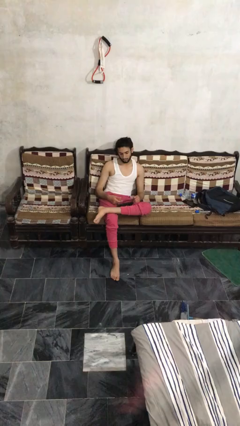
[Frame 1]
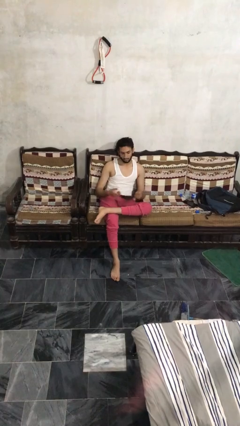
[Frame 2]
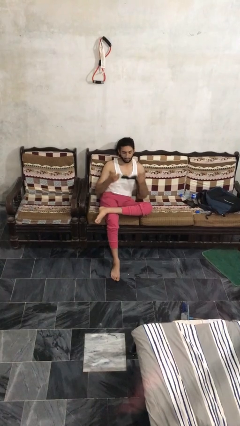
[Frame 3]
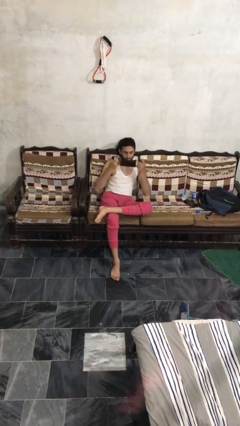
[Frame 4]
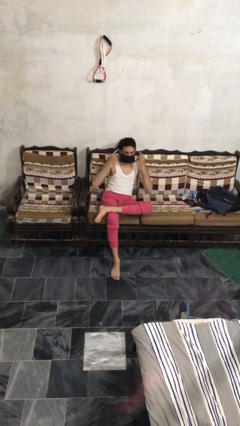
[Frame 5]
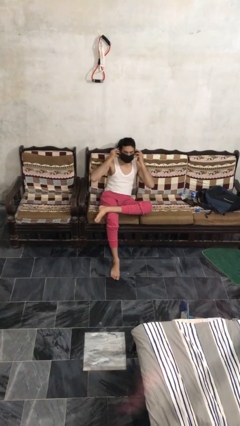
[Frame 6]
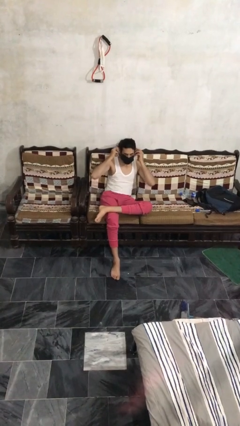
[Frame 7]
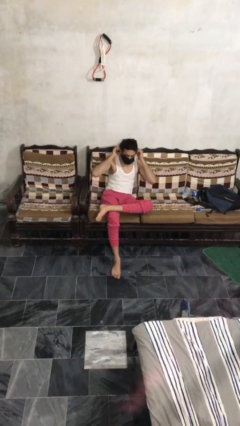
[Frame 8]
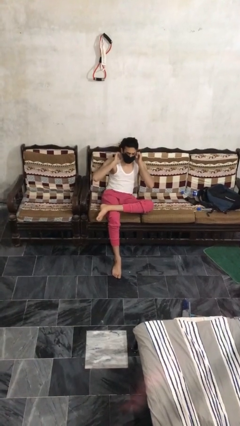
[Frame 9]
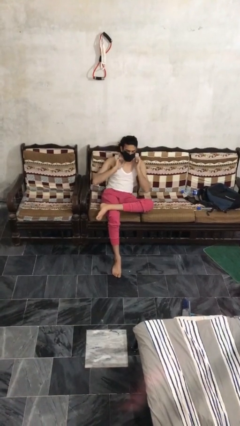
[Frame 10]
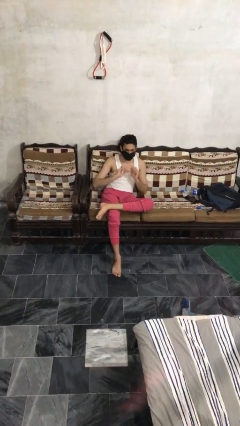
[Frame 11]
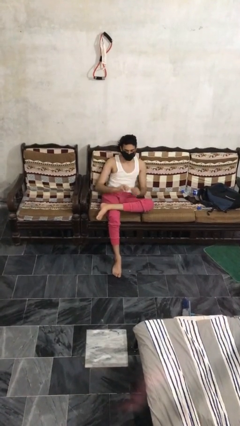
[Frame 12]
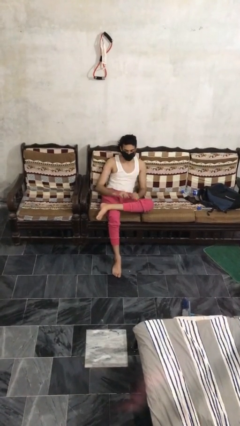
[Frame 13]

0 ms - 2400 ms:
person puts on facemask

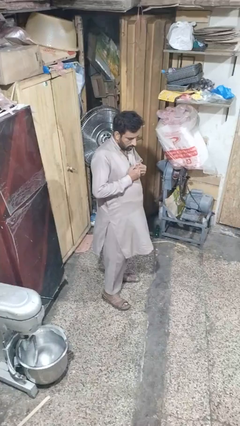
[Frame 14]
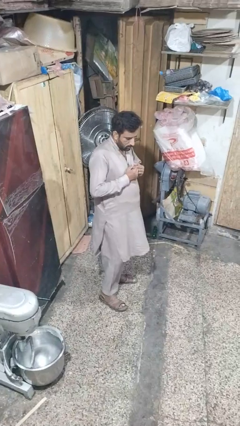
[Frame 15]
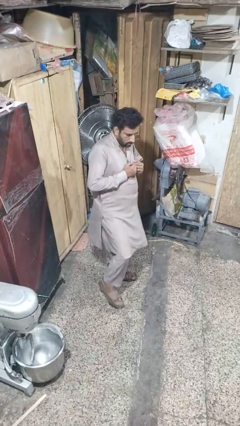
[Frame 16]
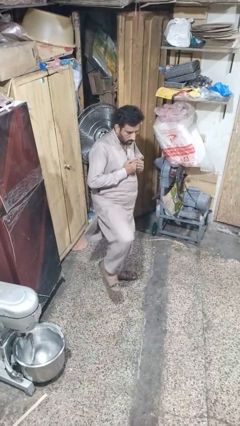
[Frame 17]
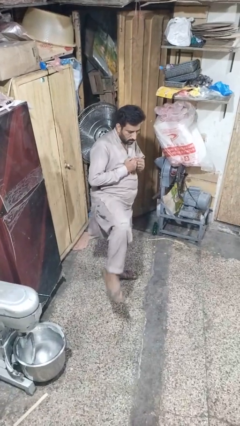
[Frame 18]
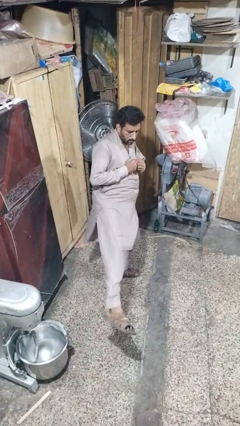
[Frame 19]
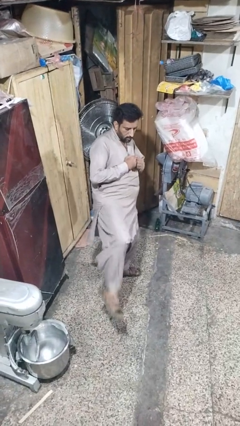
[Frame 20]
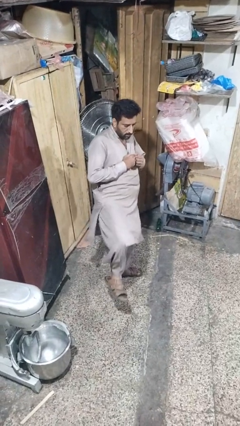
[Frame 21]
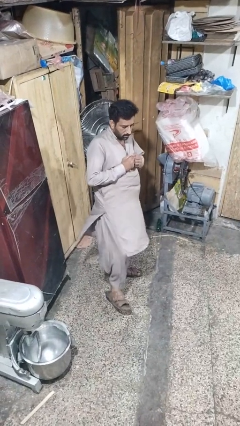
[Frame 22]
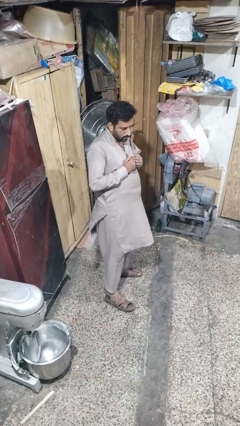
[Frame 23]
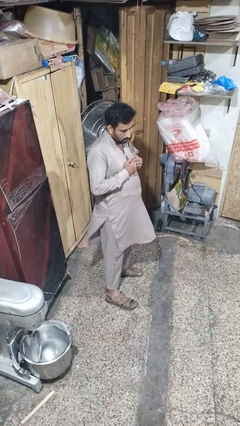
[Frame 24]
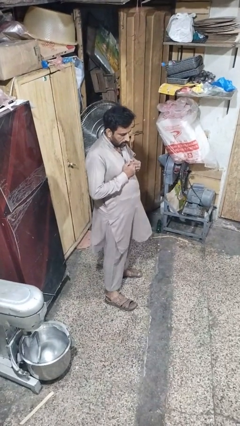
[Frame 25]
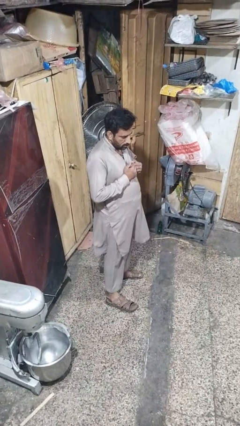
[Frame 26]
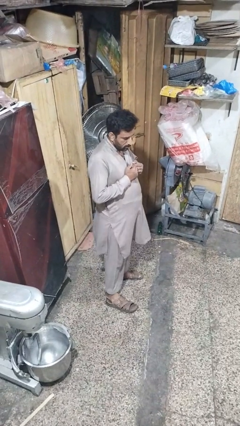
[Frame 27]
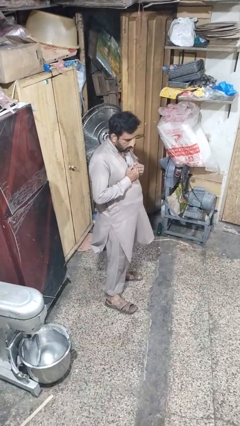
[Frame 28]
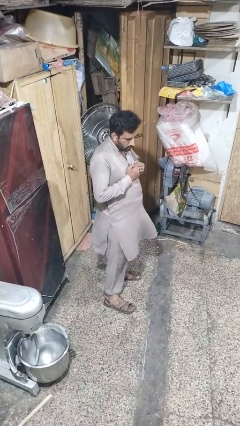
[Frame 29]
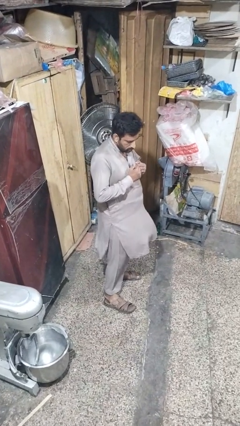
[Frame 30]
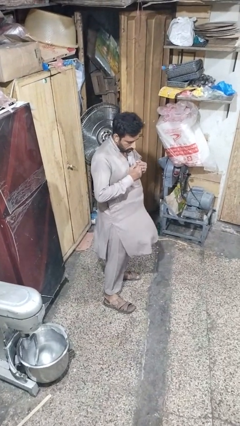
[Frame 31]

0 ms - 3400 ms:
person karate kicks

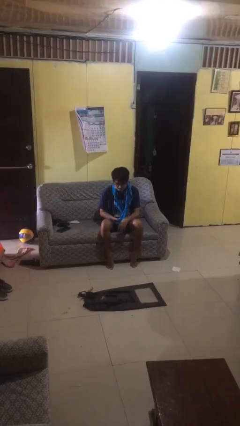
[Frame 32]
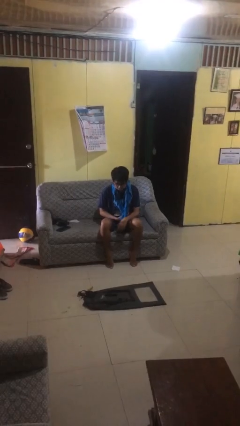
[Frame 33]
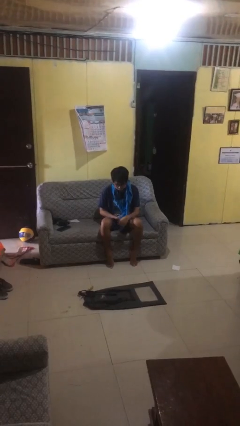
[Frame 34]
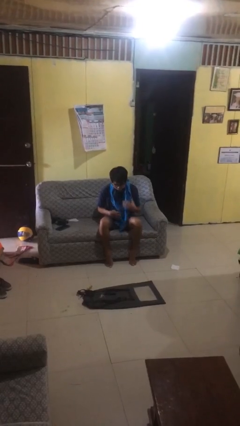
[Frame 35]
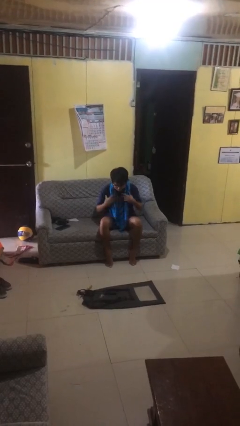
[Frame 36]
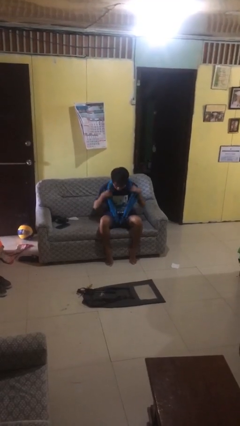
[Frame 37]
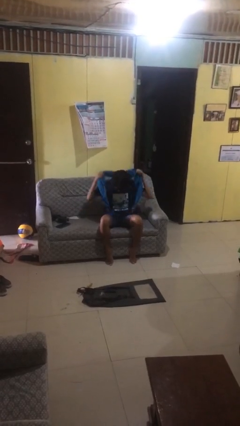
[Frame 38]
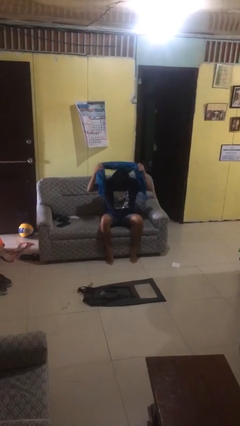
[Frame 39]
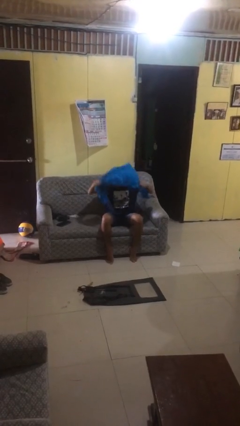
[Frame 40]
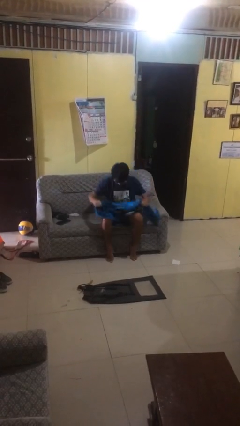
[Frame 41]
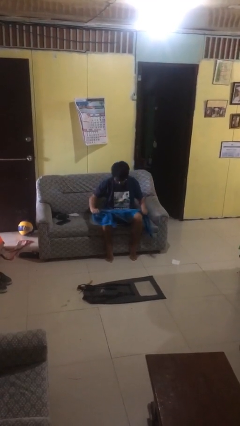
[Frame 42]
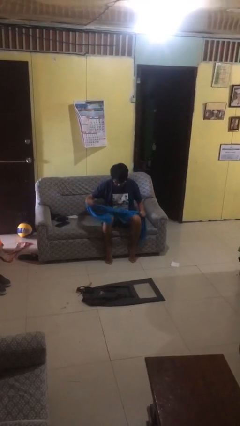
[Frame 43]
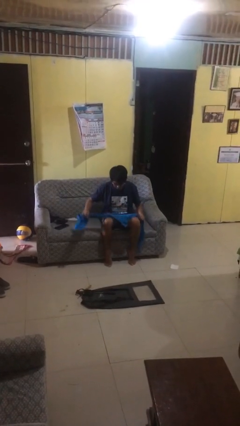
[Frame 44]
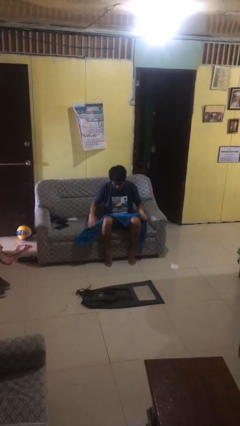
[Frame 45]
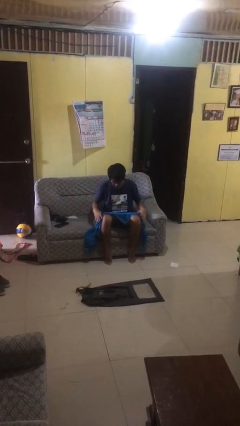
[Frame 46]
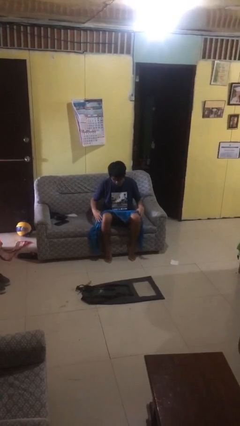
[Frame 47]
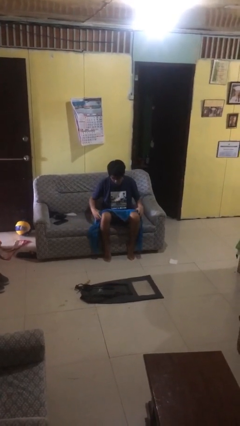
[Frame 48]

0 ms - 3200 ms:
person takes off scarf

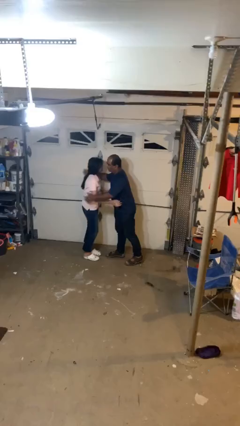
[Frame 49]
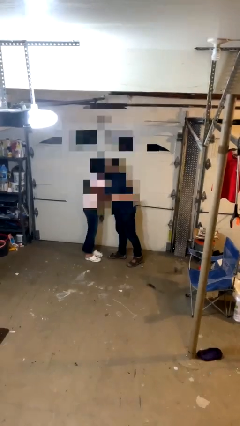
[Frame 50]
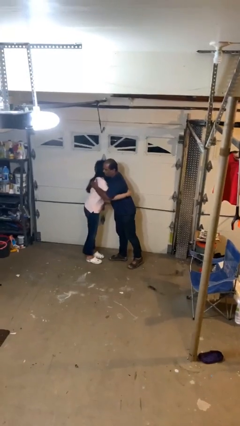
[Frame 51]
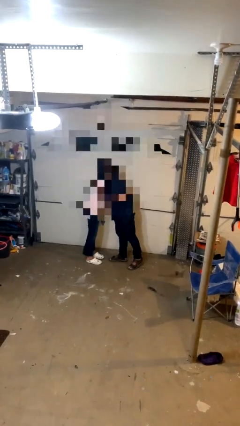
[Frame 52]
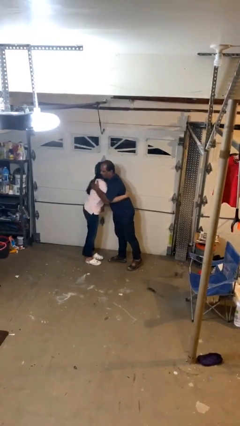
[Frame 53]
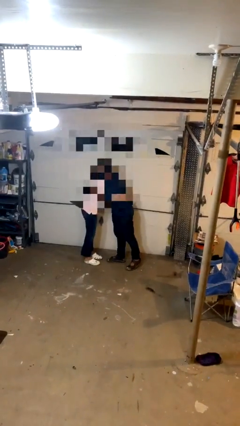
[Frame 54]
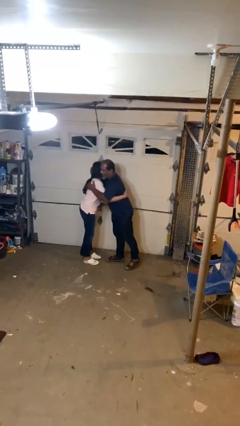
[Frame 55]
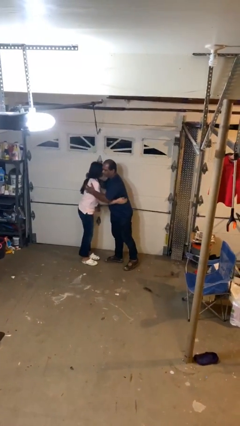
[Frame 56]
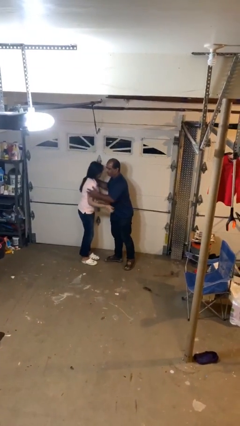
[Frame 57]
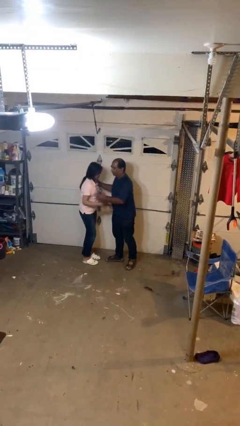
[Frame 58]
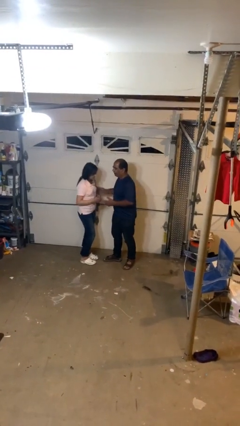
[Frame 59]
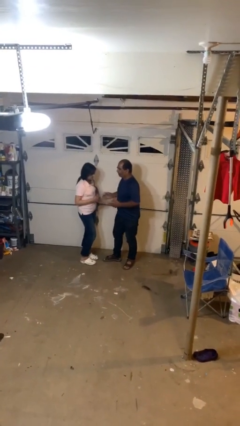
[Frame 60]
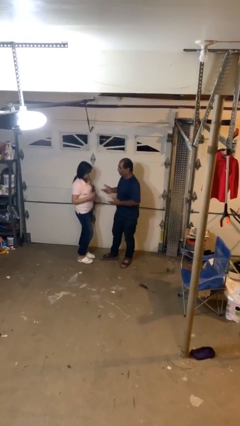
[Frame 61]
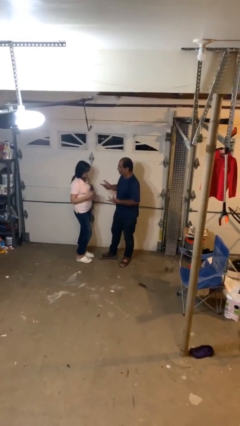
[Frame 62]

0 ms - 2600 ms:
person embraces person

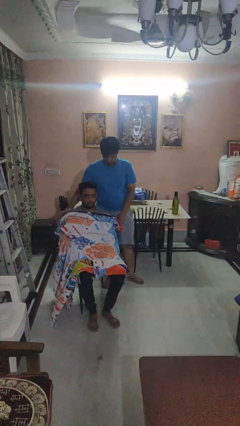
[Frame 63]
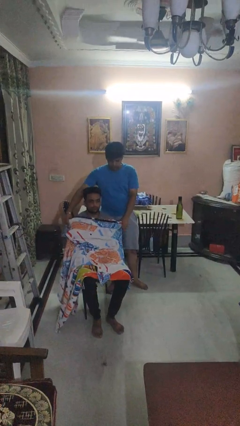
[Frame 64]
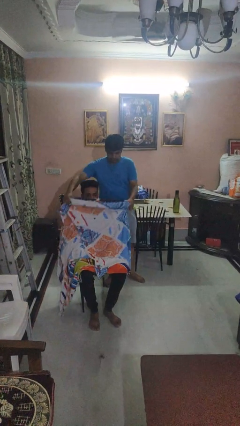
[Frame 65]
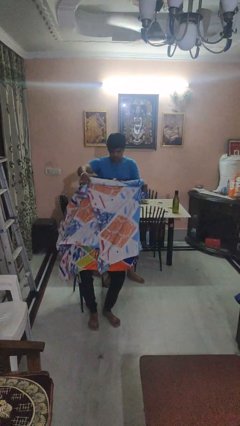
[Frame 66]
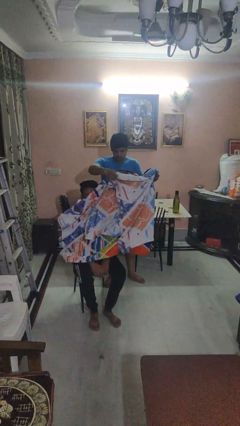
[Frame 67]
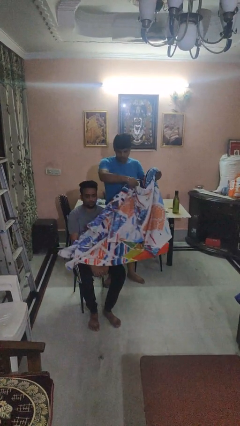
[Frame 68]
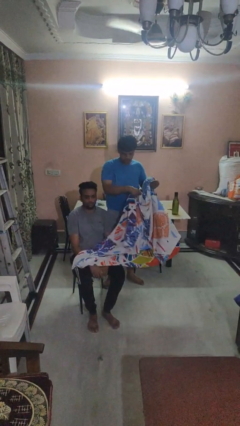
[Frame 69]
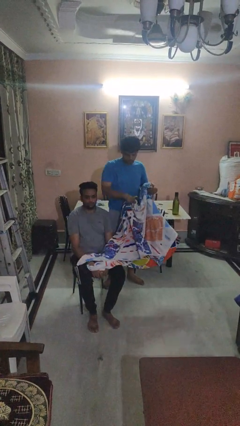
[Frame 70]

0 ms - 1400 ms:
person uncovers friend with blanket

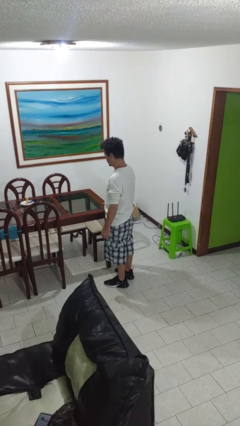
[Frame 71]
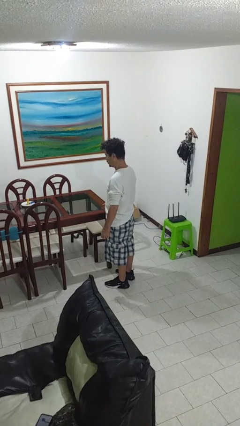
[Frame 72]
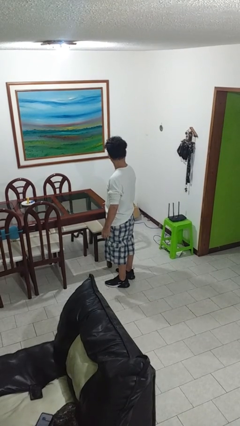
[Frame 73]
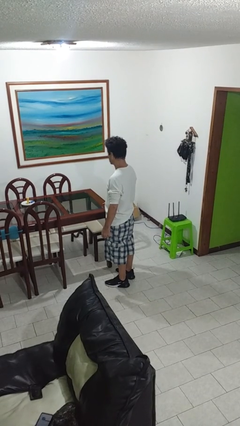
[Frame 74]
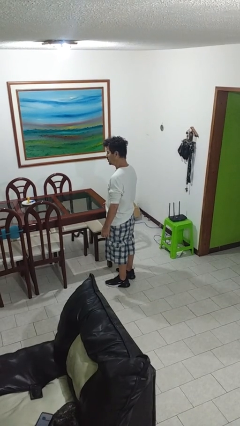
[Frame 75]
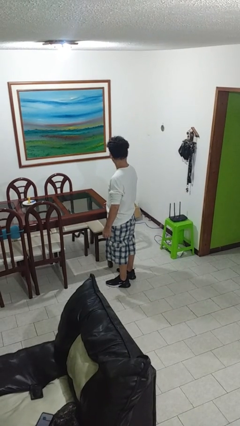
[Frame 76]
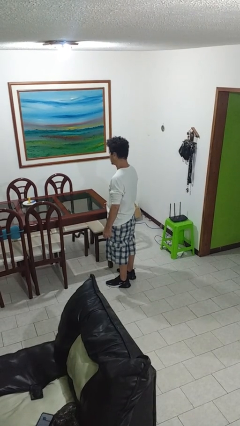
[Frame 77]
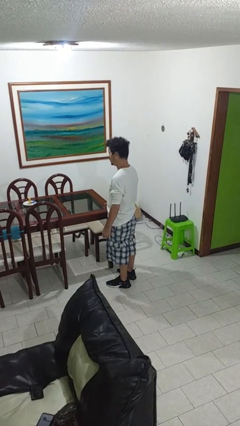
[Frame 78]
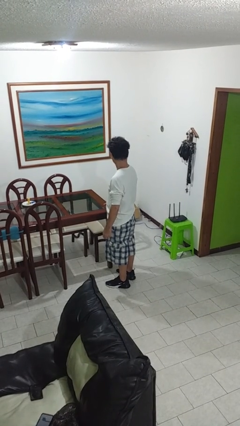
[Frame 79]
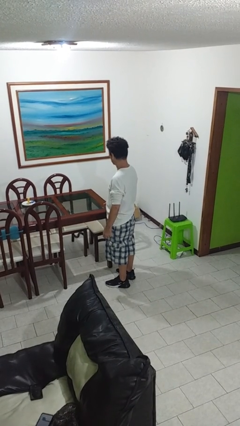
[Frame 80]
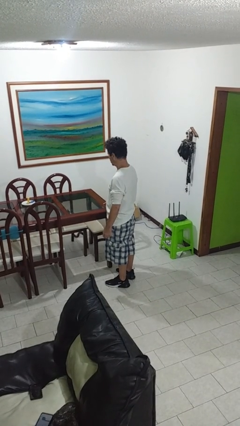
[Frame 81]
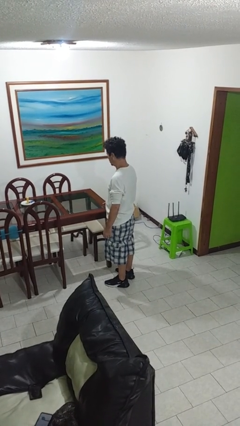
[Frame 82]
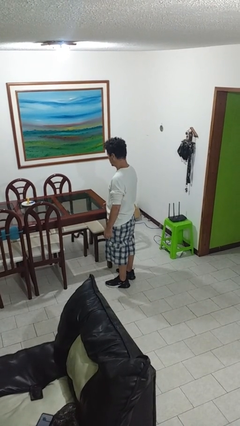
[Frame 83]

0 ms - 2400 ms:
person shakes head

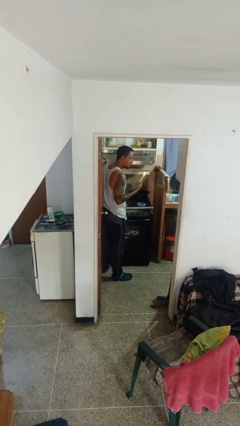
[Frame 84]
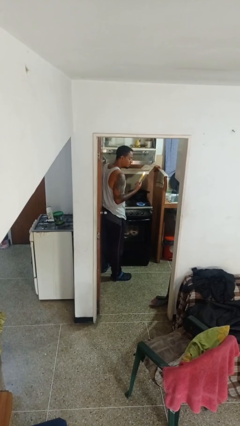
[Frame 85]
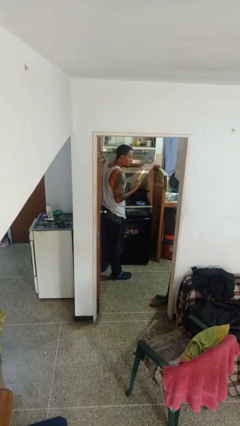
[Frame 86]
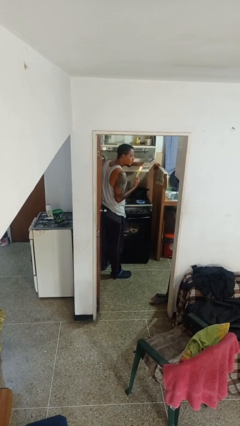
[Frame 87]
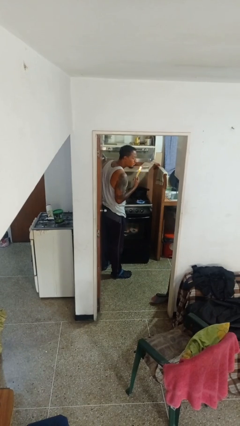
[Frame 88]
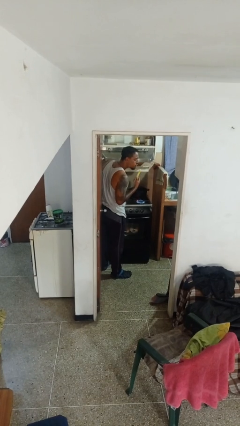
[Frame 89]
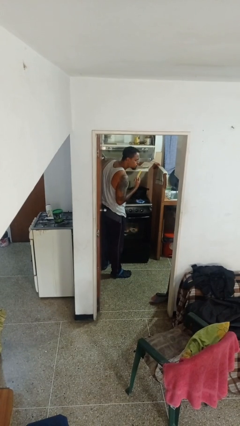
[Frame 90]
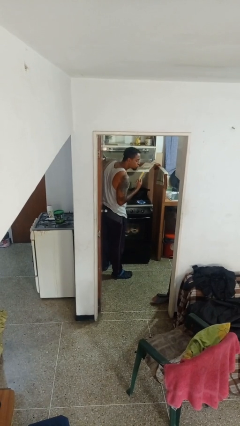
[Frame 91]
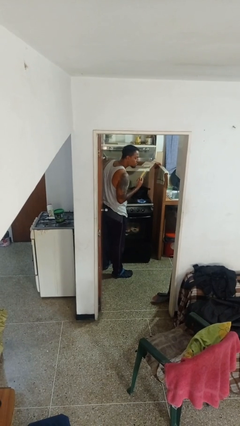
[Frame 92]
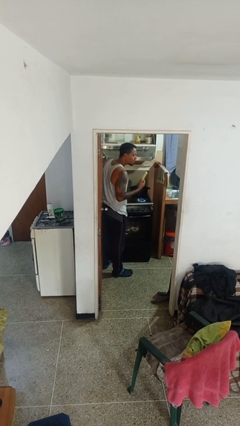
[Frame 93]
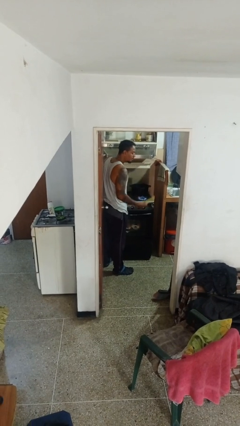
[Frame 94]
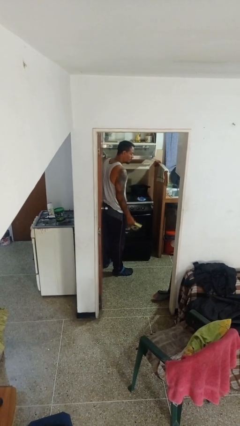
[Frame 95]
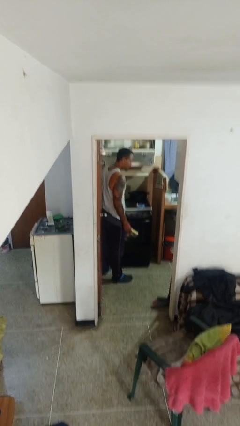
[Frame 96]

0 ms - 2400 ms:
person extinguishes candle
